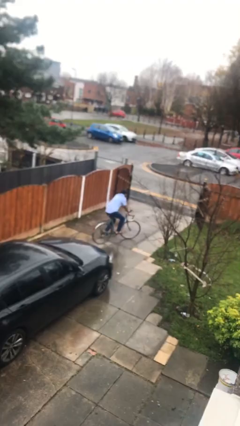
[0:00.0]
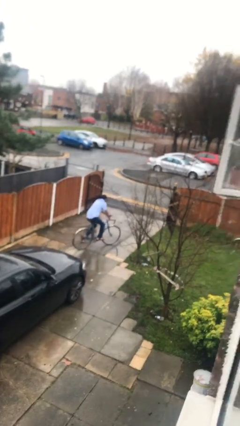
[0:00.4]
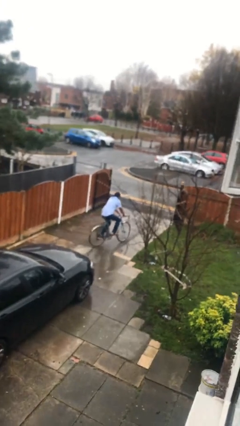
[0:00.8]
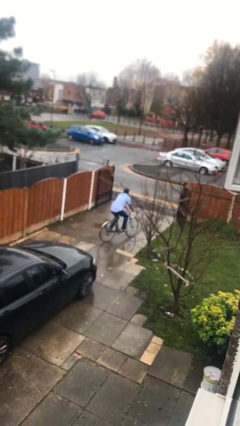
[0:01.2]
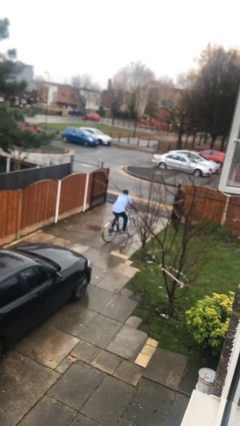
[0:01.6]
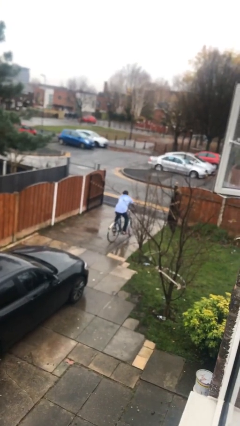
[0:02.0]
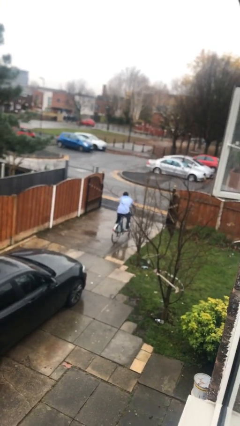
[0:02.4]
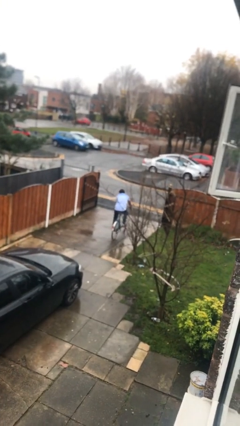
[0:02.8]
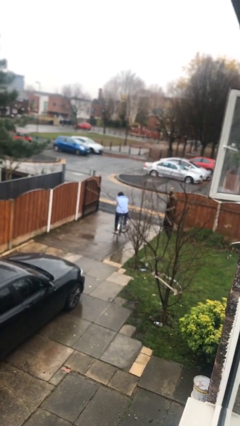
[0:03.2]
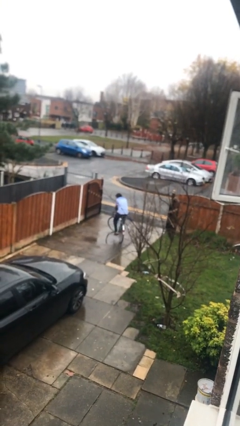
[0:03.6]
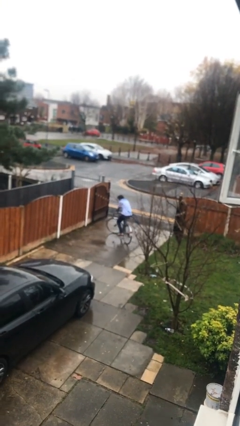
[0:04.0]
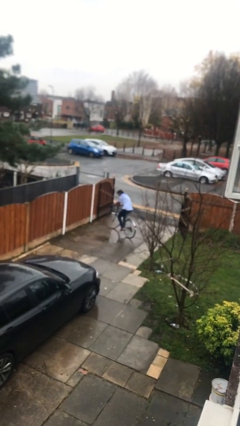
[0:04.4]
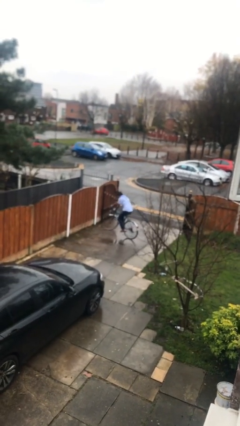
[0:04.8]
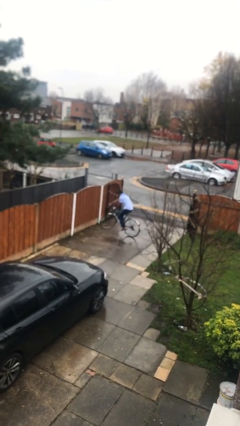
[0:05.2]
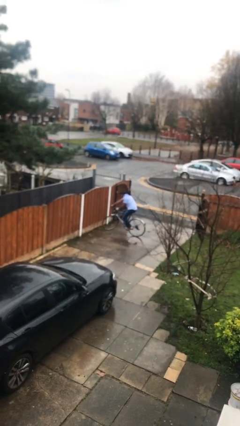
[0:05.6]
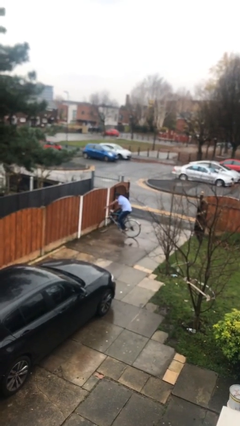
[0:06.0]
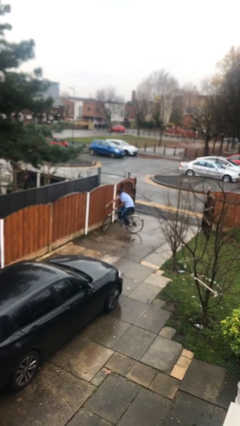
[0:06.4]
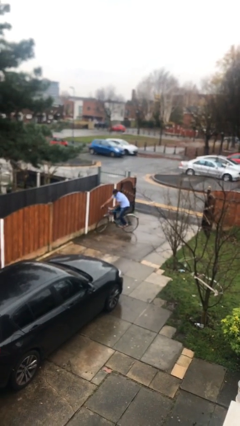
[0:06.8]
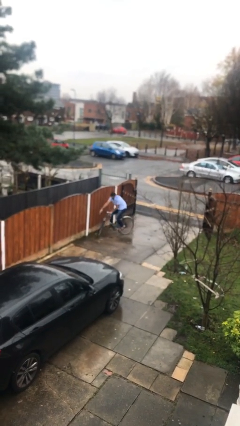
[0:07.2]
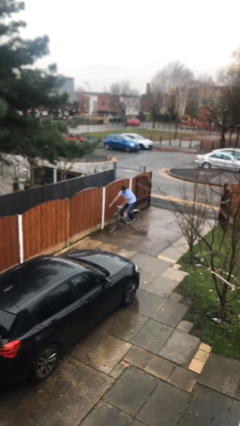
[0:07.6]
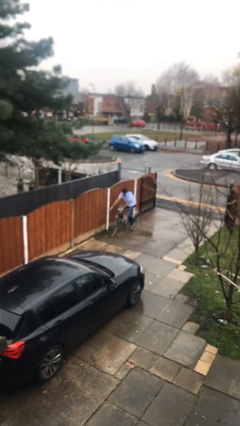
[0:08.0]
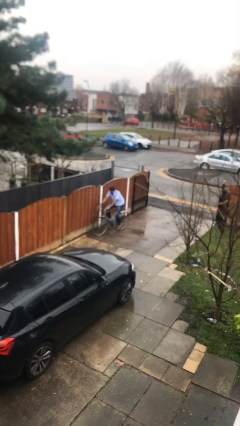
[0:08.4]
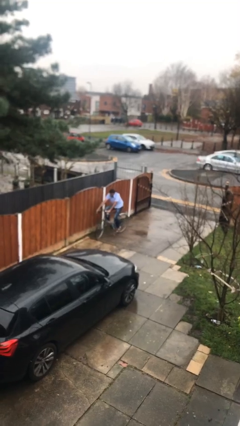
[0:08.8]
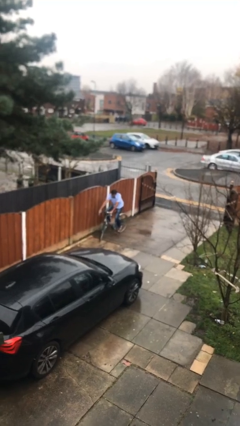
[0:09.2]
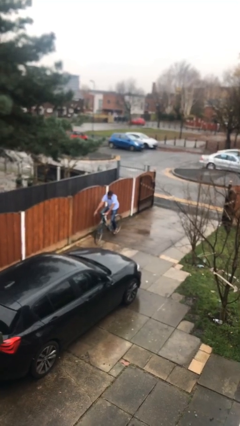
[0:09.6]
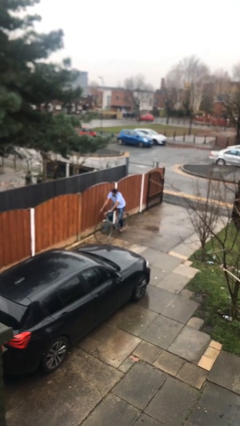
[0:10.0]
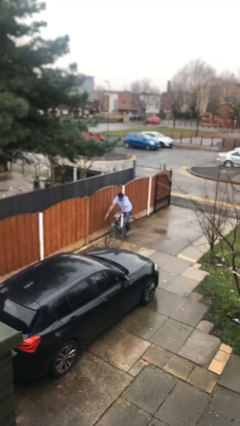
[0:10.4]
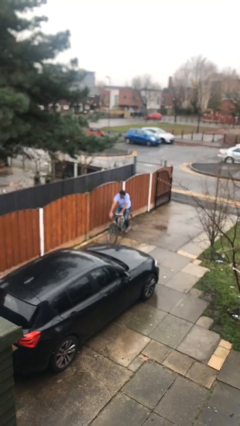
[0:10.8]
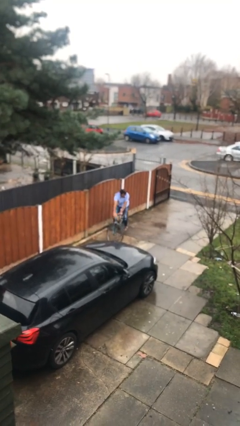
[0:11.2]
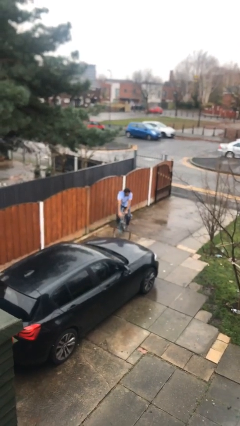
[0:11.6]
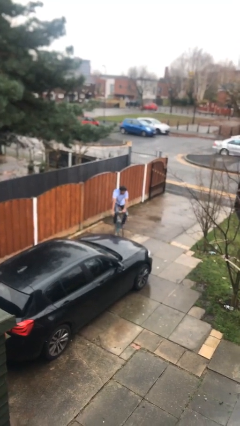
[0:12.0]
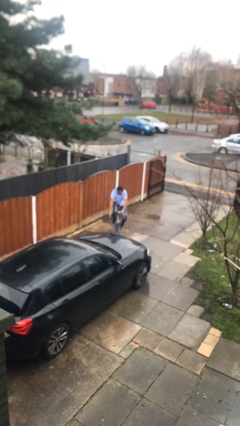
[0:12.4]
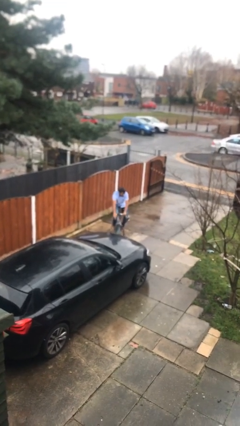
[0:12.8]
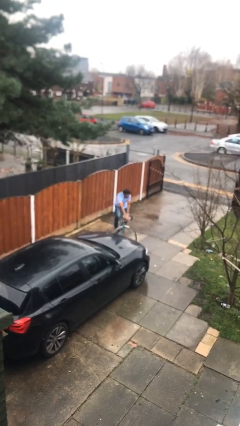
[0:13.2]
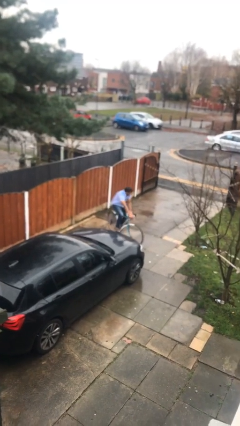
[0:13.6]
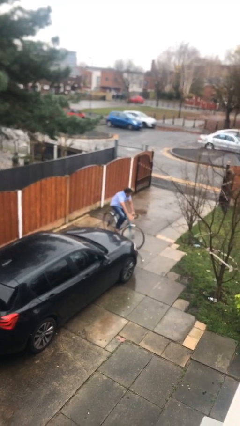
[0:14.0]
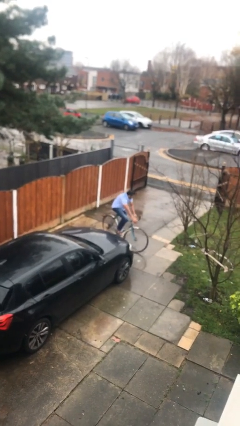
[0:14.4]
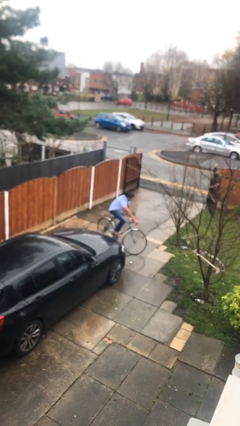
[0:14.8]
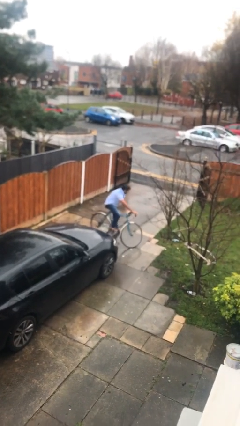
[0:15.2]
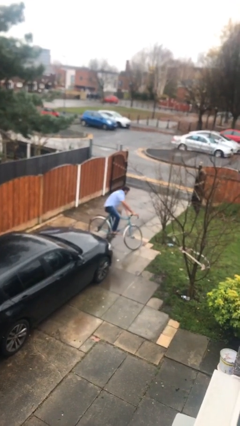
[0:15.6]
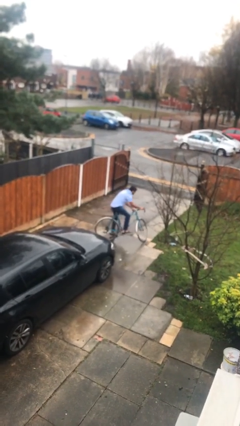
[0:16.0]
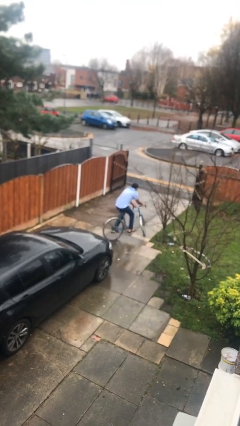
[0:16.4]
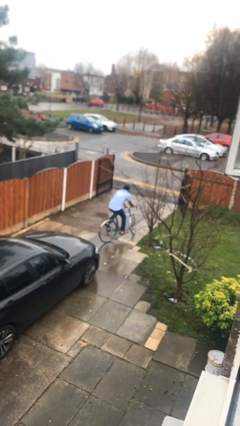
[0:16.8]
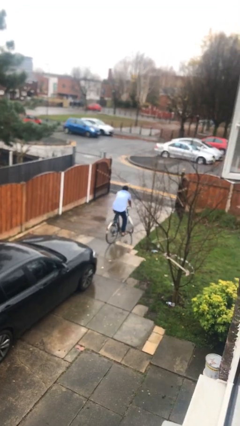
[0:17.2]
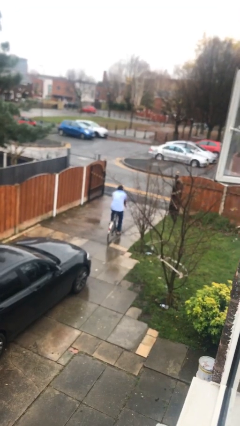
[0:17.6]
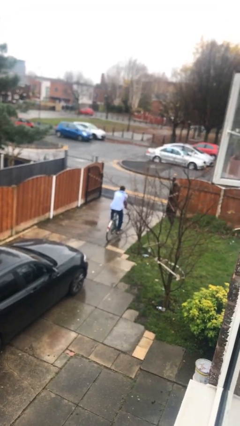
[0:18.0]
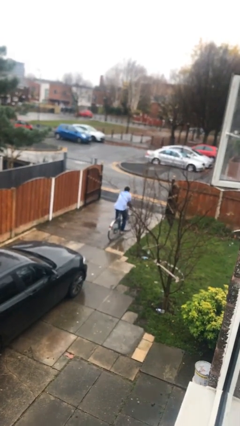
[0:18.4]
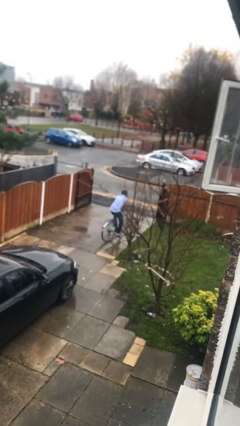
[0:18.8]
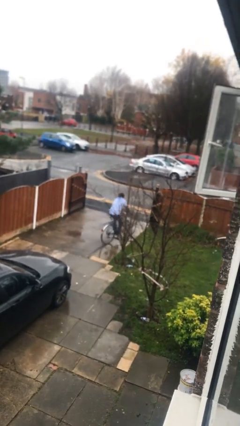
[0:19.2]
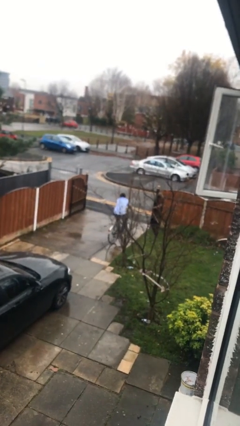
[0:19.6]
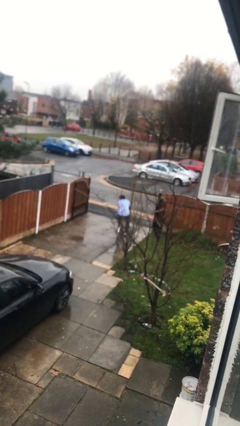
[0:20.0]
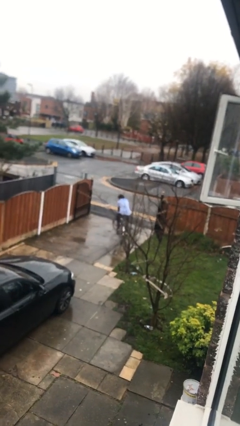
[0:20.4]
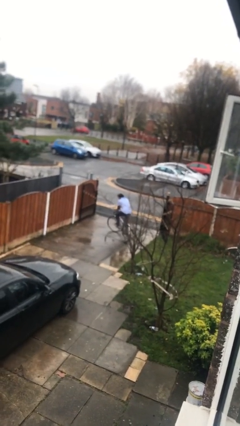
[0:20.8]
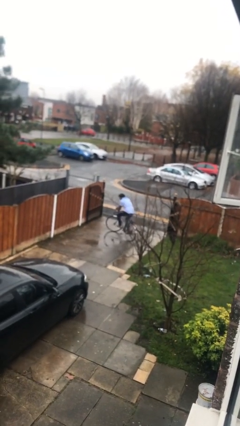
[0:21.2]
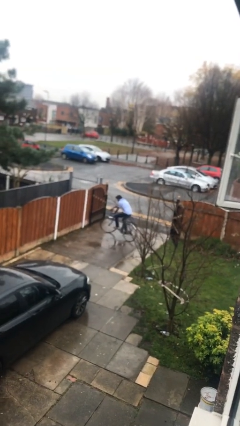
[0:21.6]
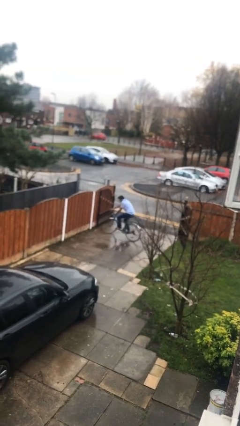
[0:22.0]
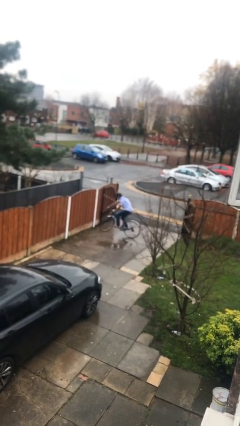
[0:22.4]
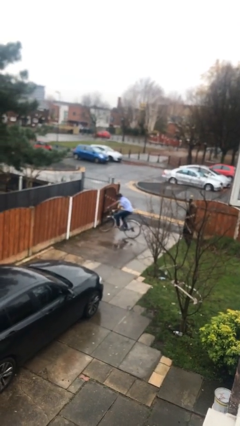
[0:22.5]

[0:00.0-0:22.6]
person rides bicycle

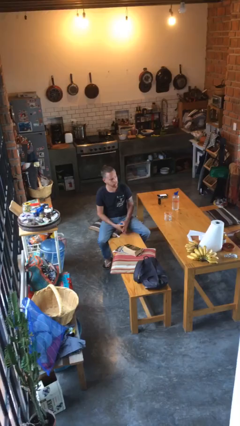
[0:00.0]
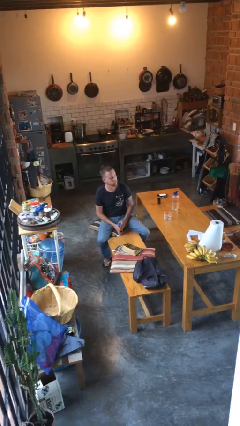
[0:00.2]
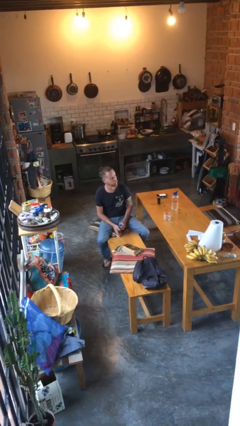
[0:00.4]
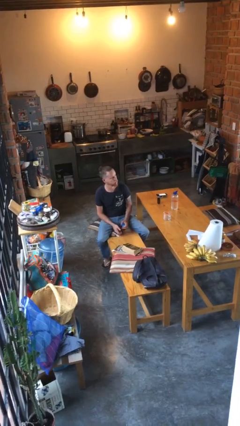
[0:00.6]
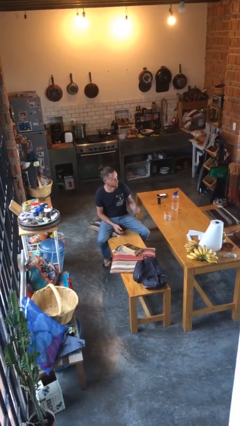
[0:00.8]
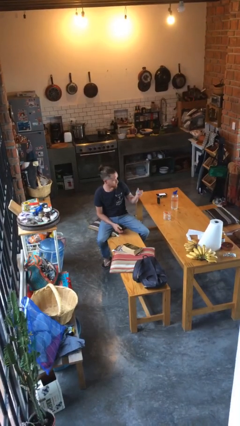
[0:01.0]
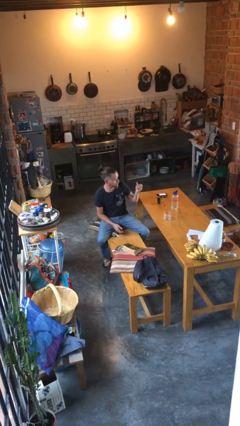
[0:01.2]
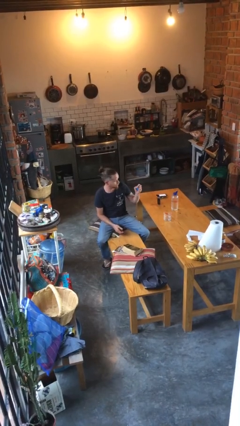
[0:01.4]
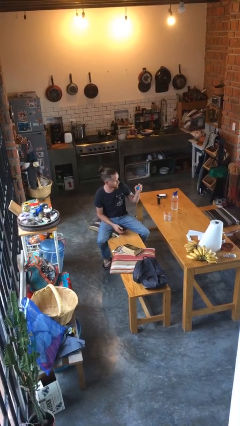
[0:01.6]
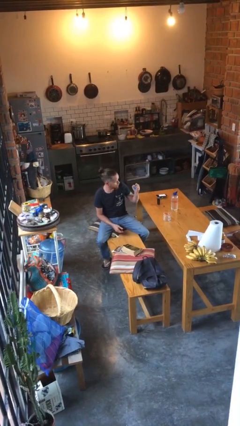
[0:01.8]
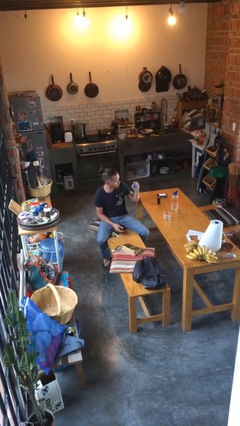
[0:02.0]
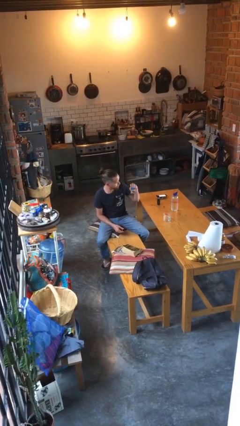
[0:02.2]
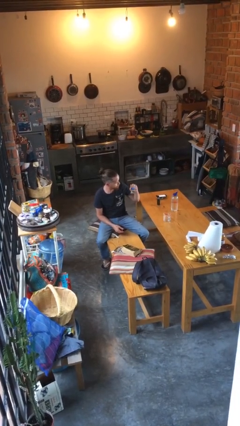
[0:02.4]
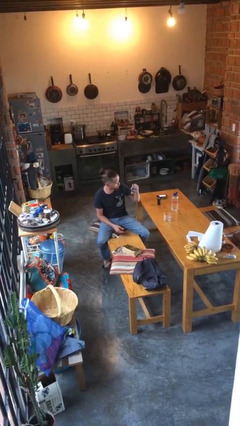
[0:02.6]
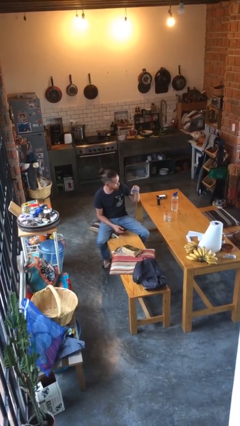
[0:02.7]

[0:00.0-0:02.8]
person squeezes object

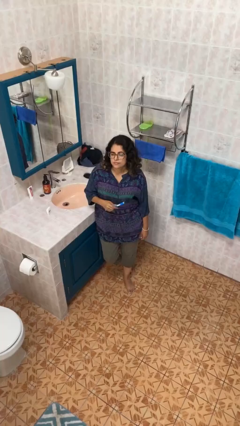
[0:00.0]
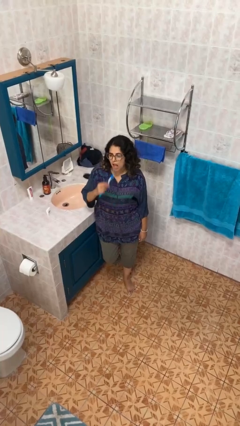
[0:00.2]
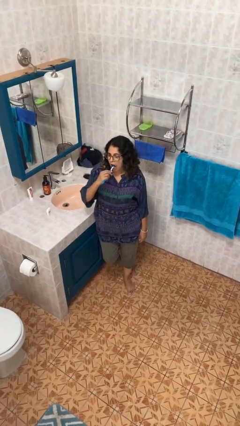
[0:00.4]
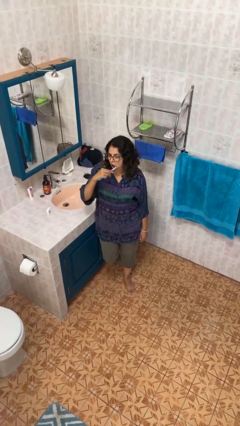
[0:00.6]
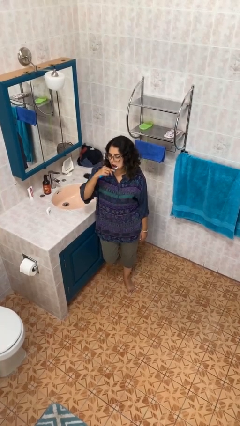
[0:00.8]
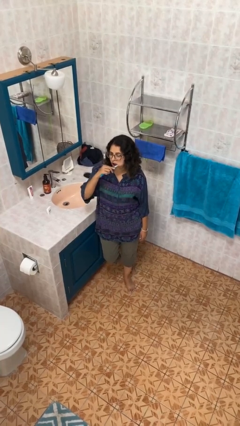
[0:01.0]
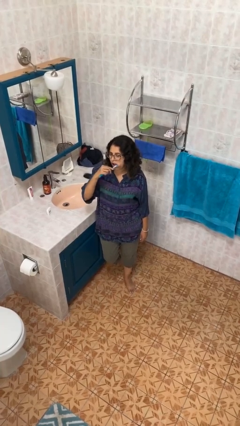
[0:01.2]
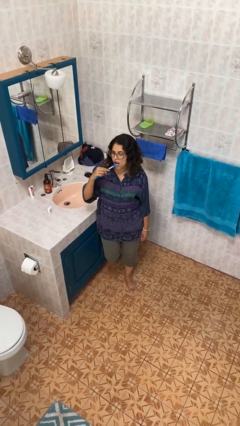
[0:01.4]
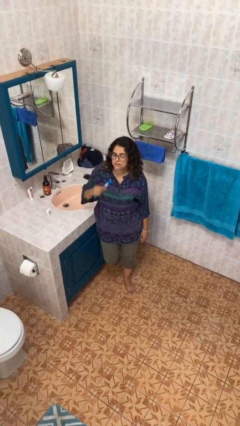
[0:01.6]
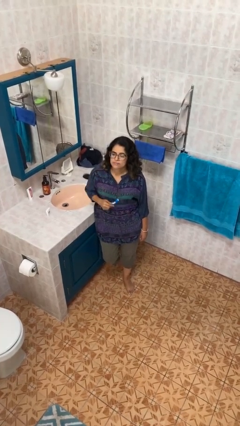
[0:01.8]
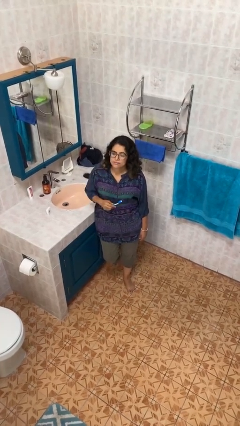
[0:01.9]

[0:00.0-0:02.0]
person brushes teeth

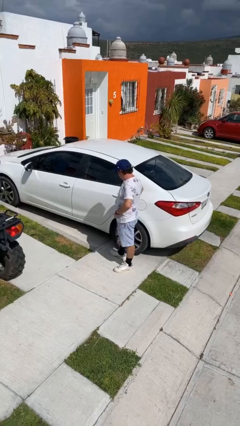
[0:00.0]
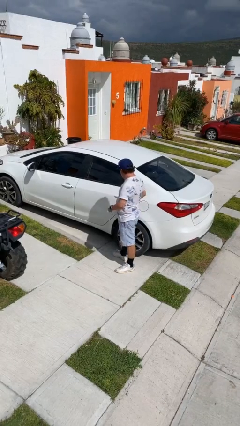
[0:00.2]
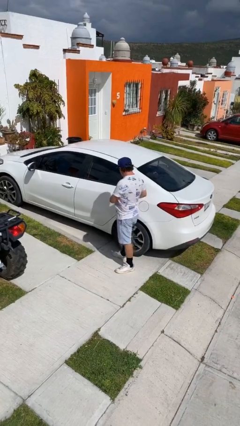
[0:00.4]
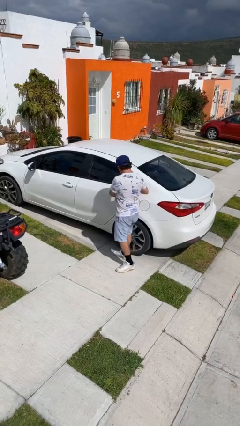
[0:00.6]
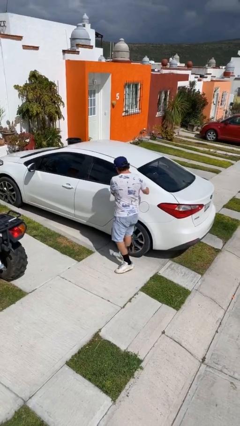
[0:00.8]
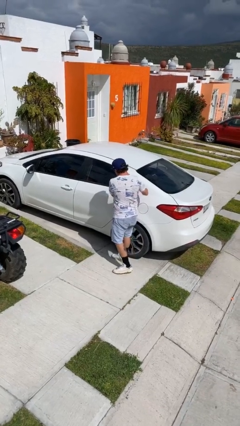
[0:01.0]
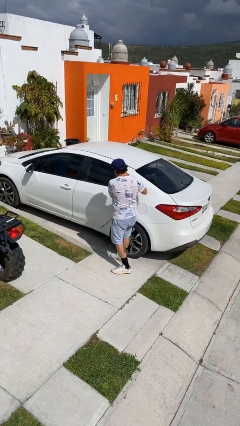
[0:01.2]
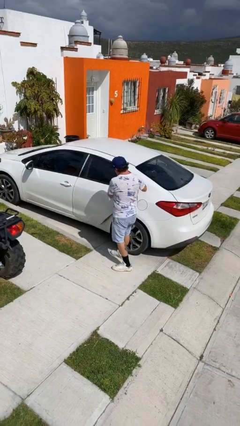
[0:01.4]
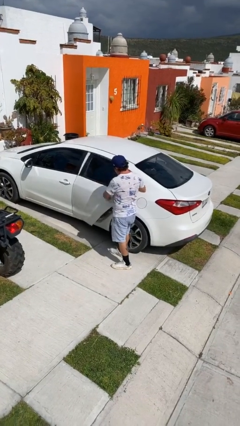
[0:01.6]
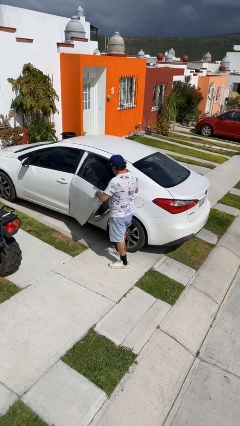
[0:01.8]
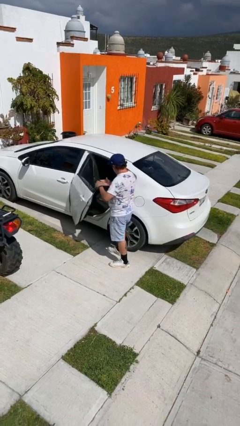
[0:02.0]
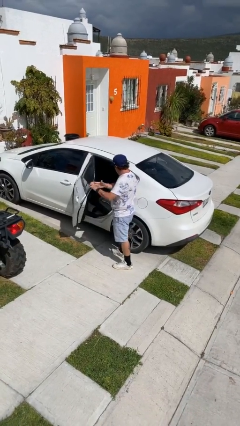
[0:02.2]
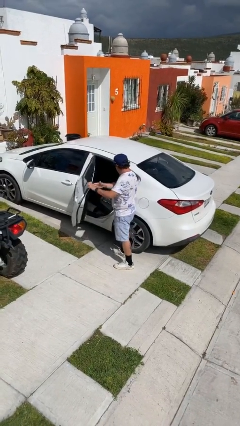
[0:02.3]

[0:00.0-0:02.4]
person opens car door
